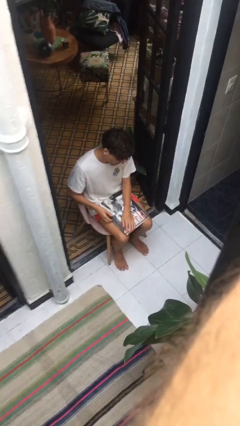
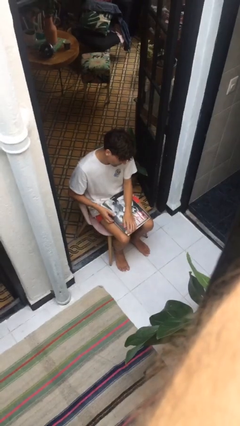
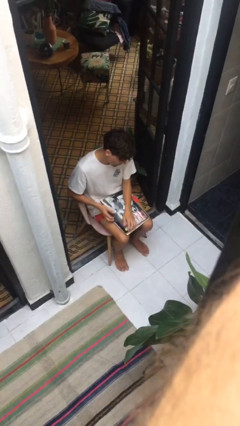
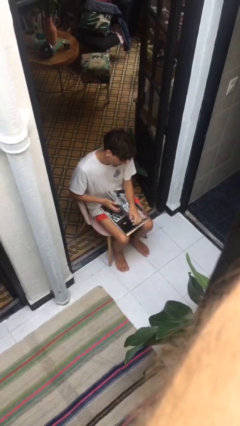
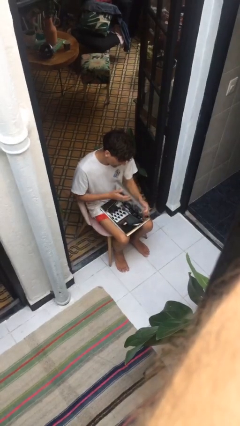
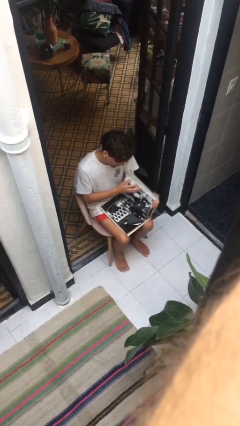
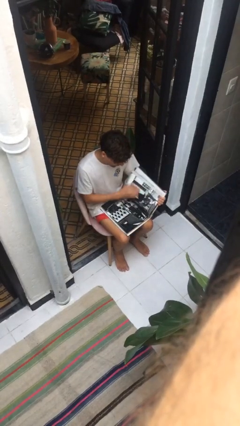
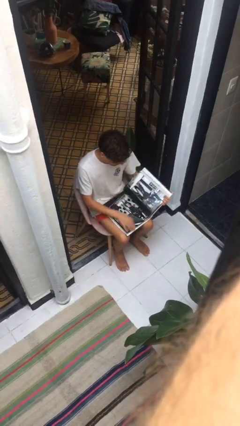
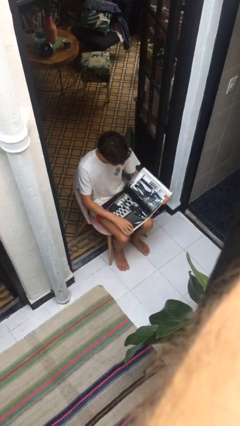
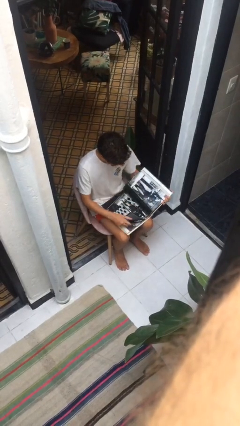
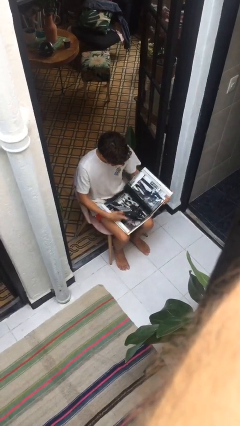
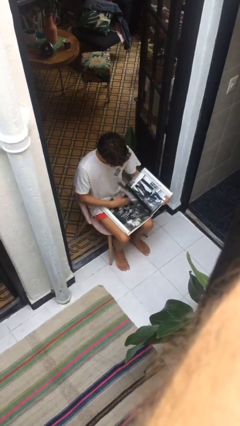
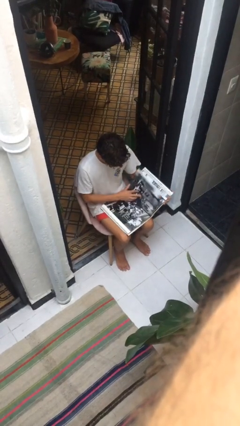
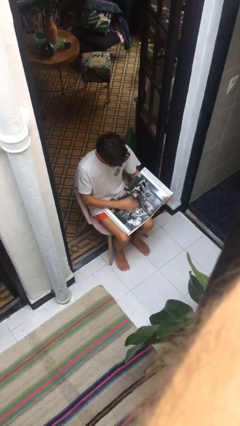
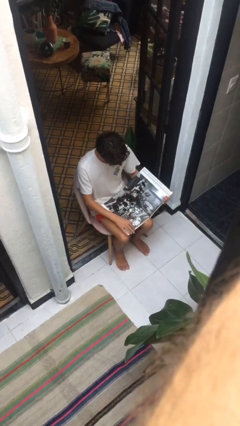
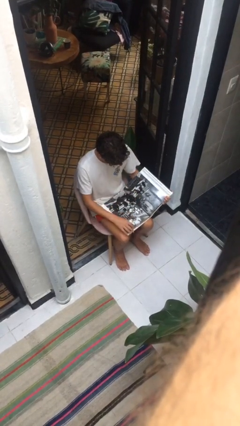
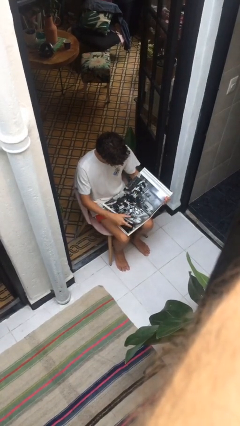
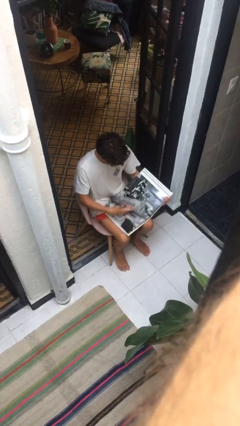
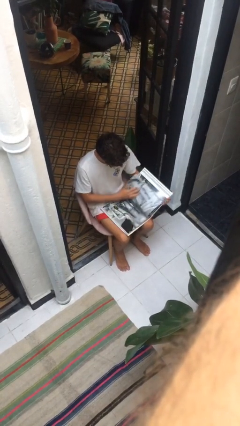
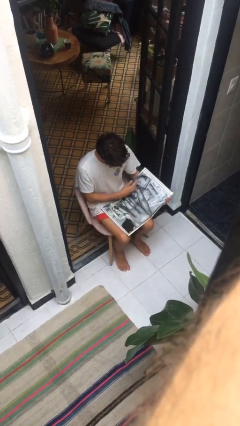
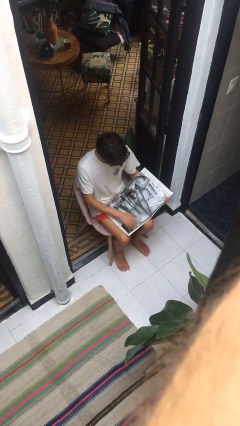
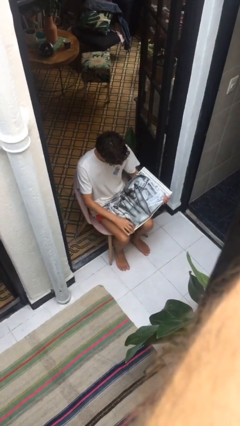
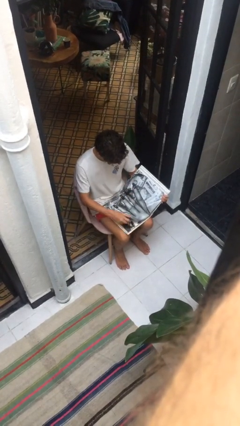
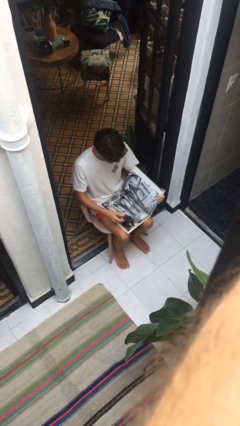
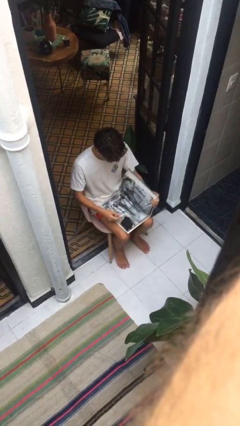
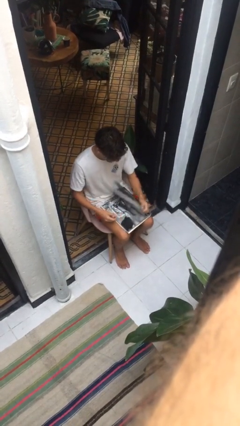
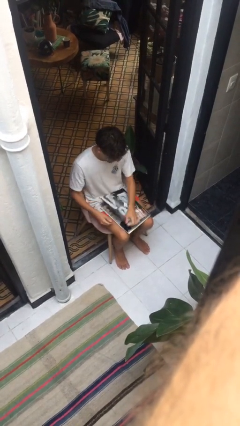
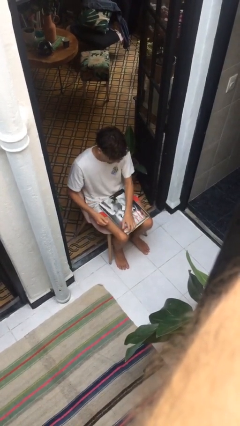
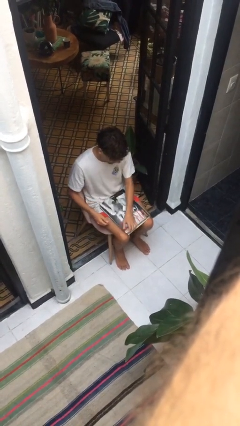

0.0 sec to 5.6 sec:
person reads document

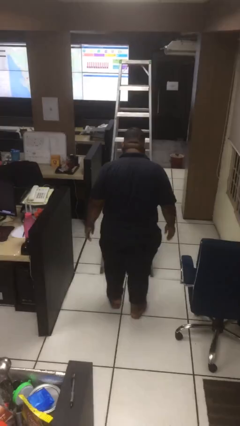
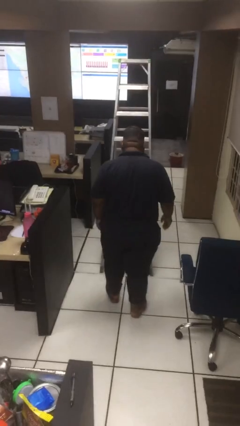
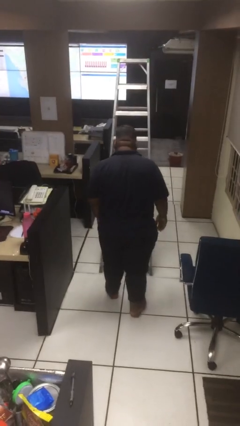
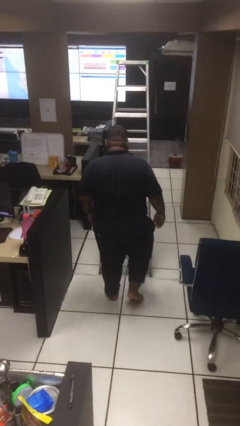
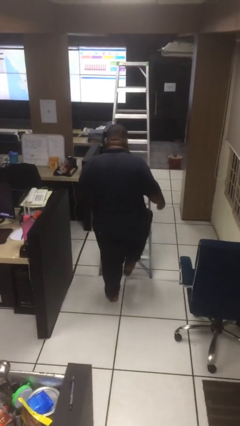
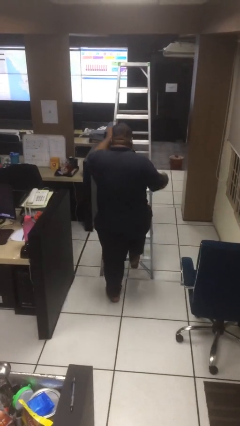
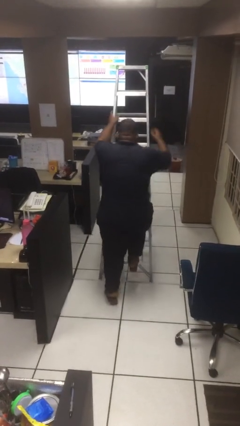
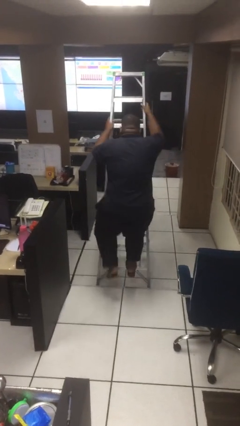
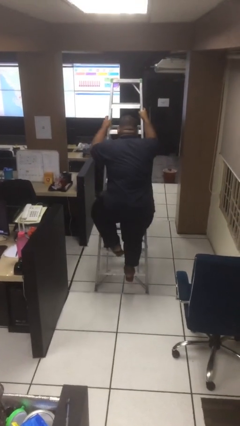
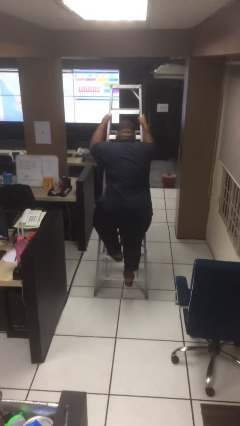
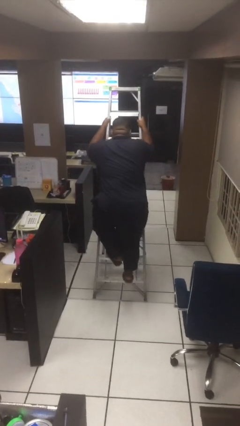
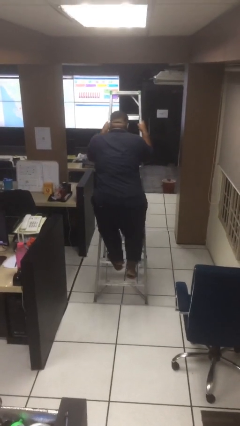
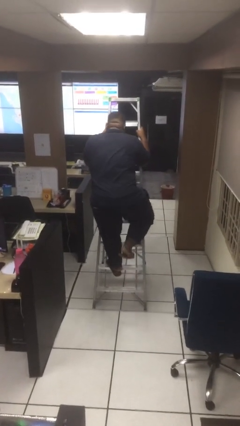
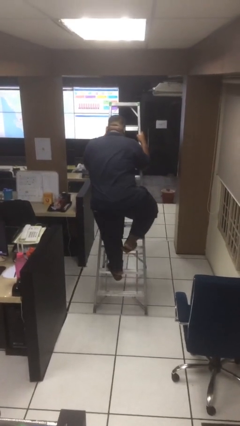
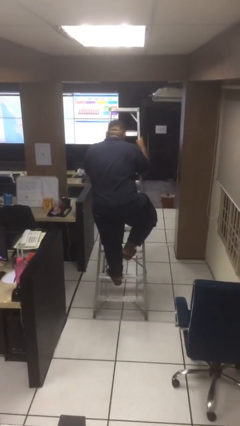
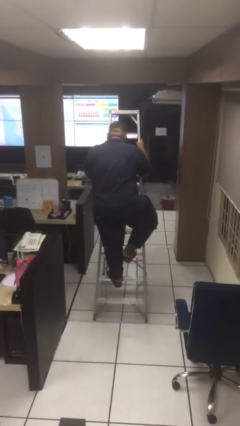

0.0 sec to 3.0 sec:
person climbs up ladder

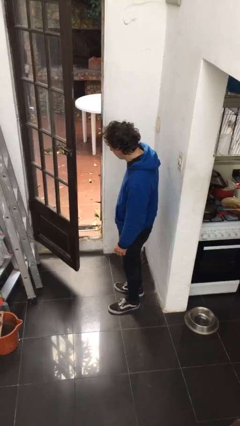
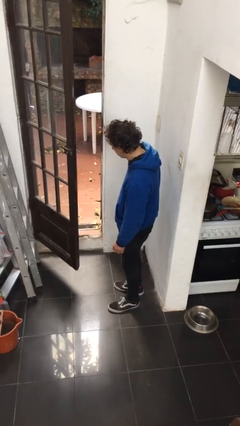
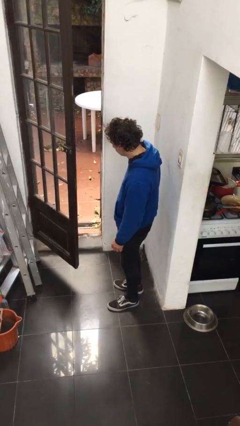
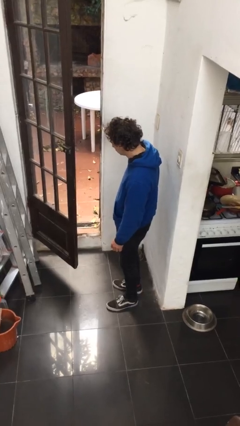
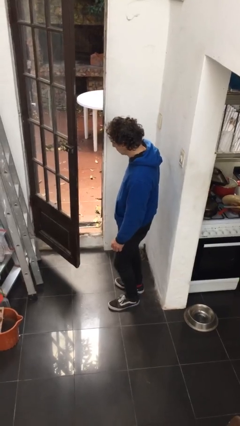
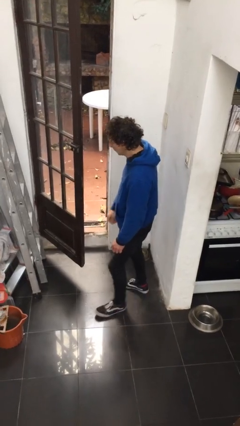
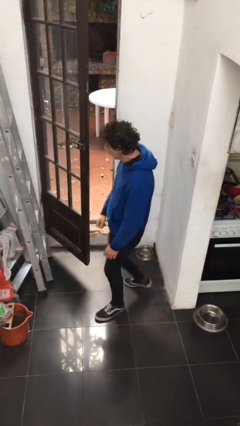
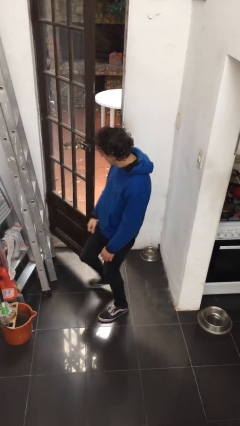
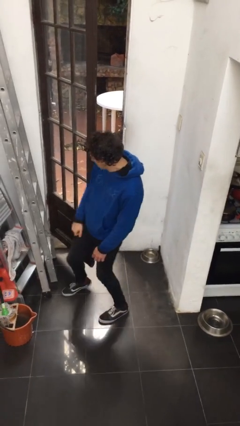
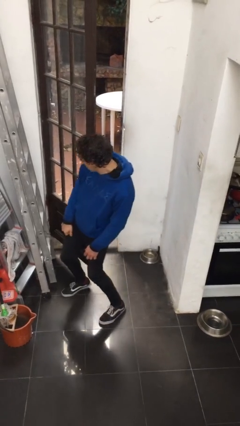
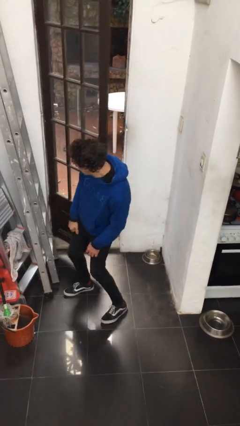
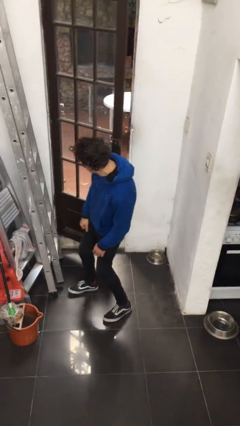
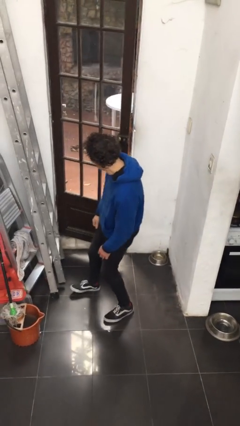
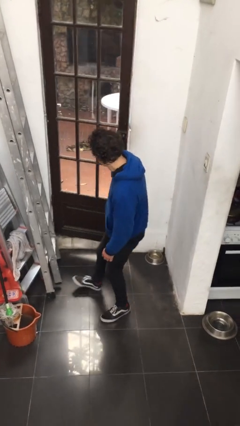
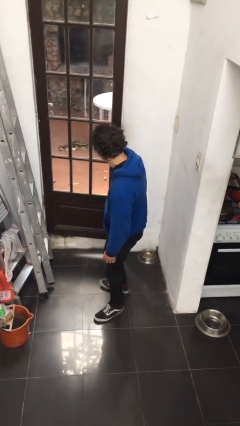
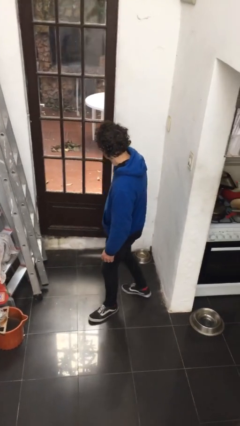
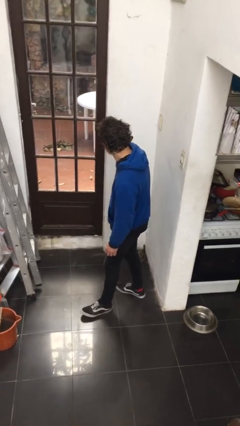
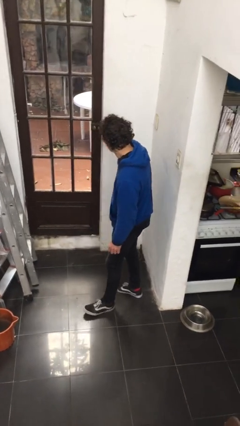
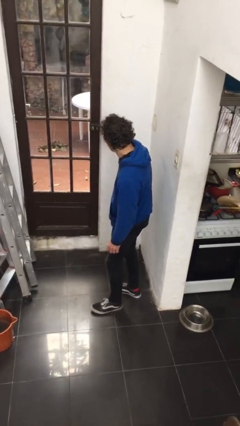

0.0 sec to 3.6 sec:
person closes door with hip

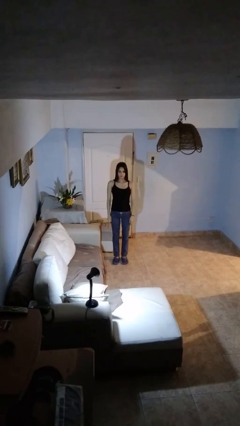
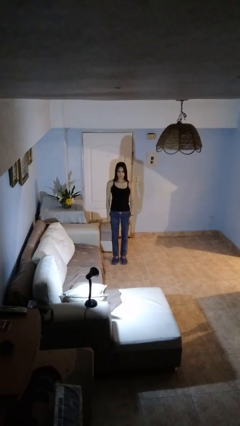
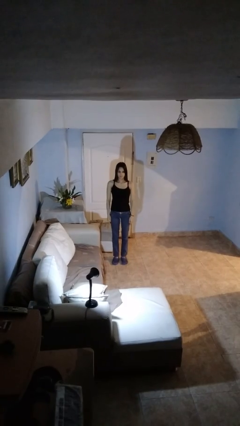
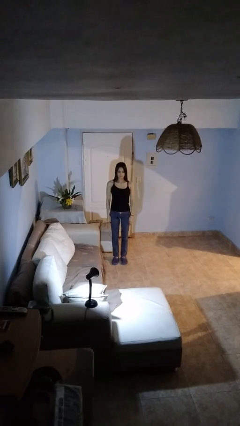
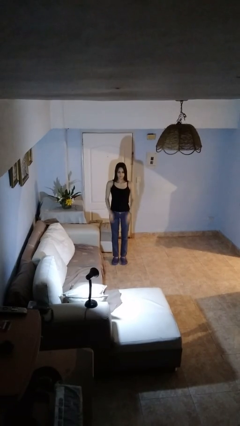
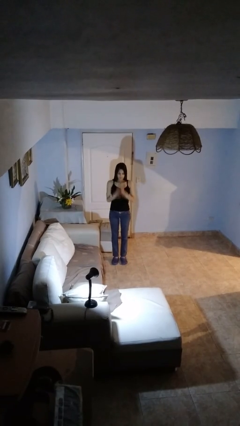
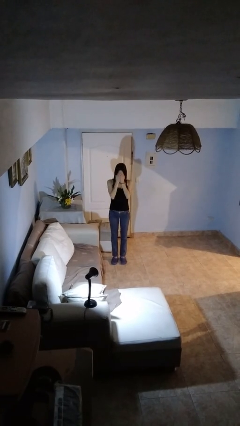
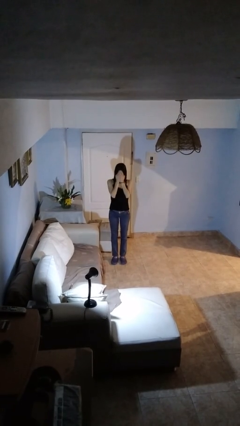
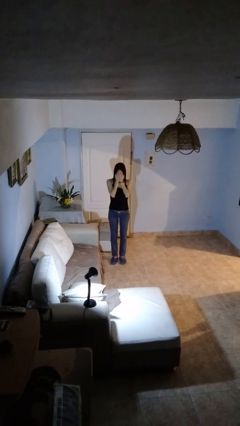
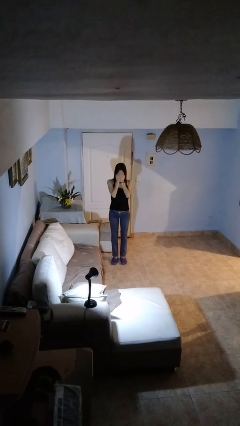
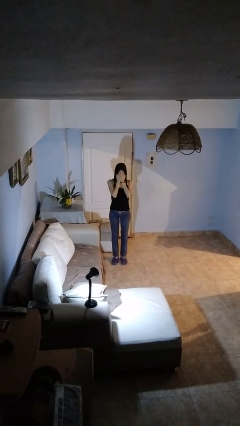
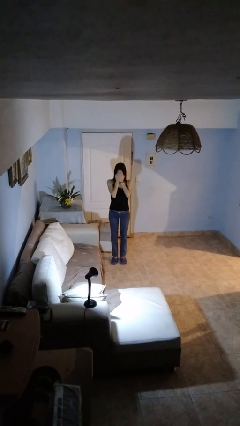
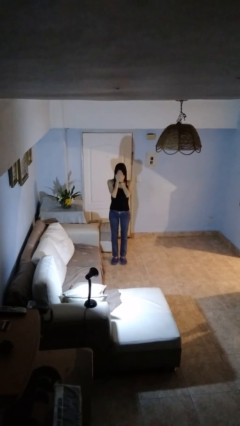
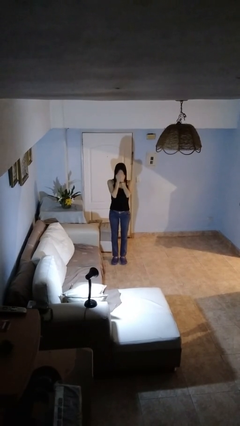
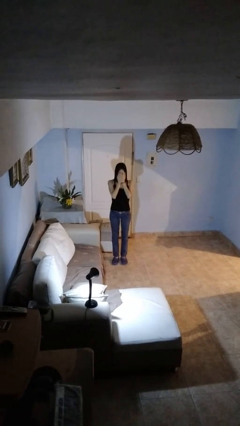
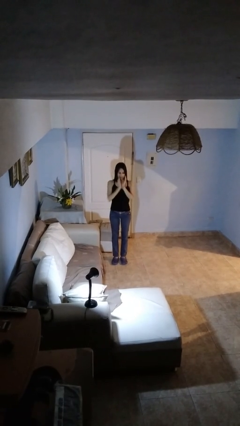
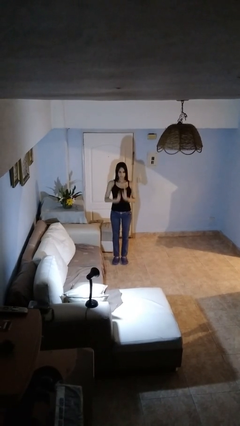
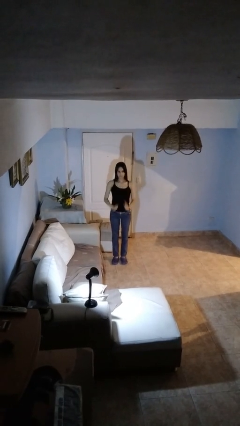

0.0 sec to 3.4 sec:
person covers face with hands

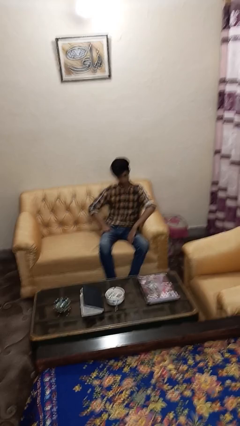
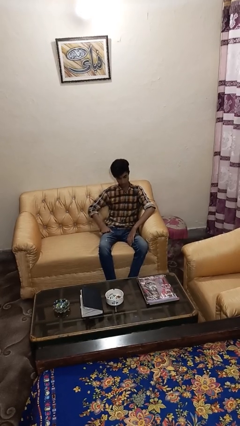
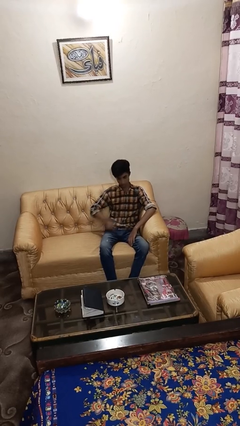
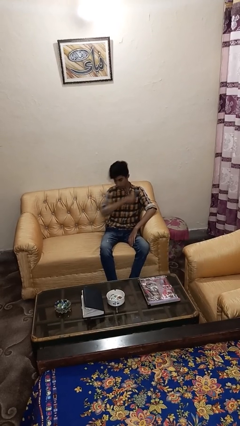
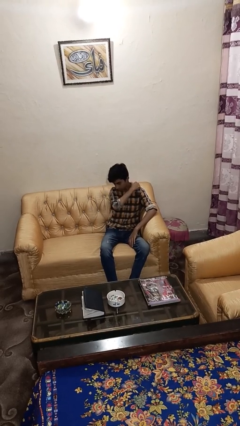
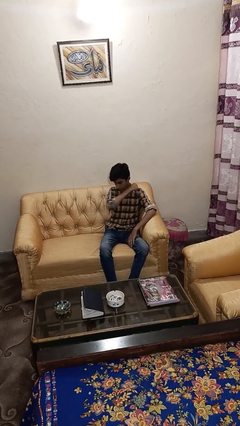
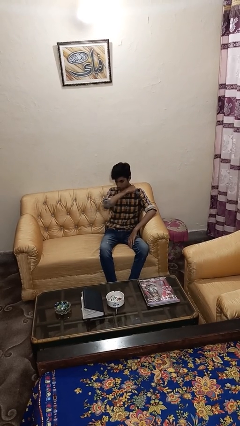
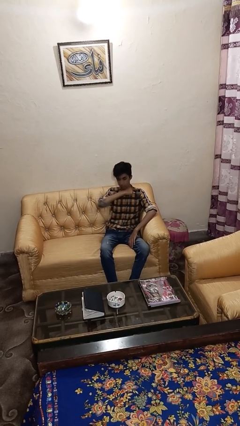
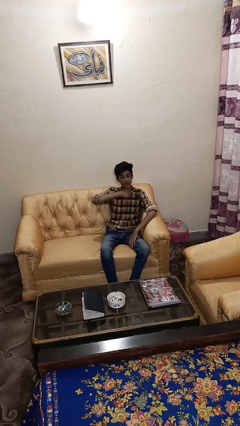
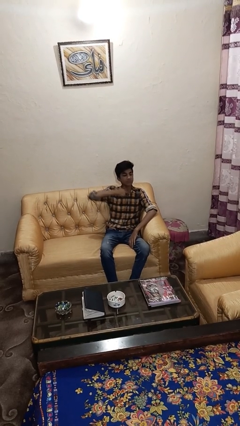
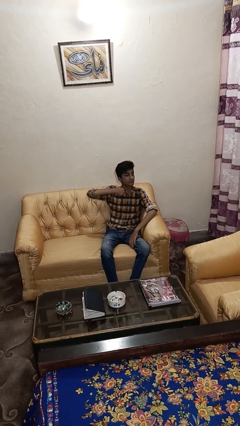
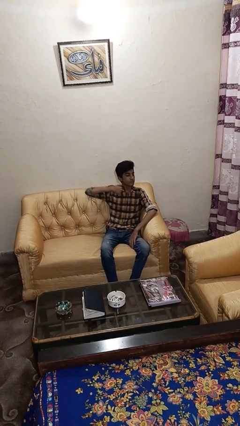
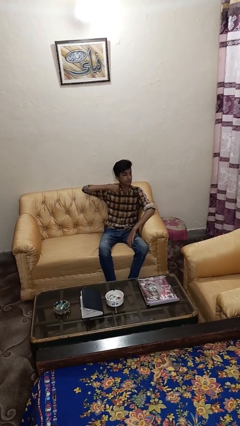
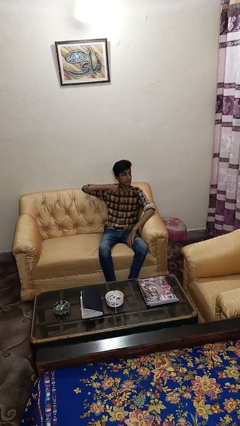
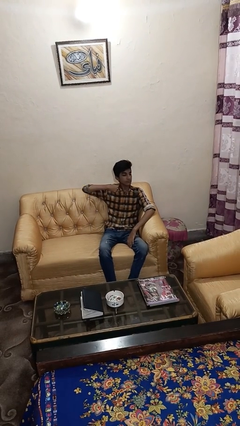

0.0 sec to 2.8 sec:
person gestures cut
